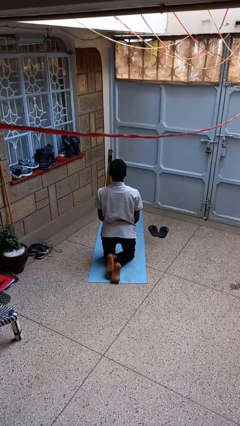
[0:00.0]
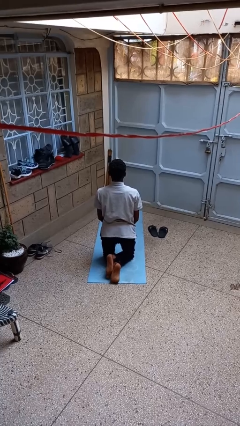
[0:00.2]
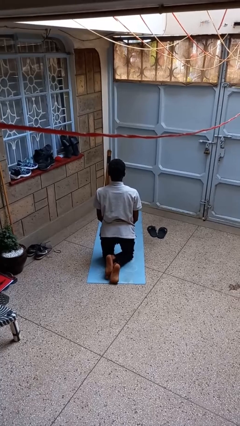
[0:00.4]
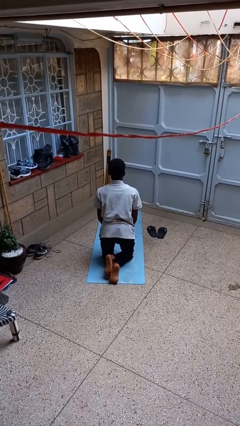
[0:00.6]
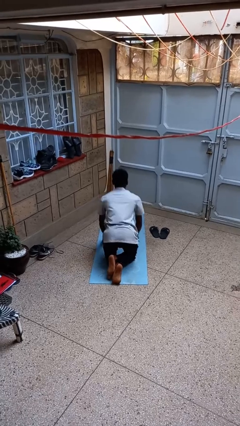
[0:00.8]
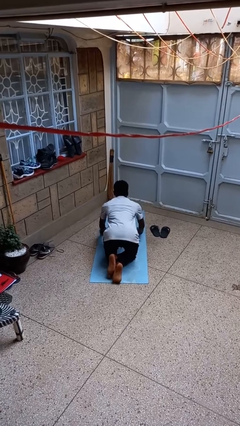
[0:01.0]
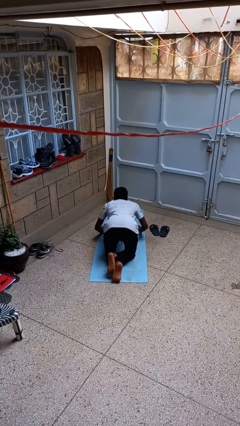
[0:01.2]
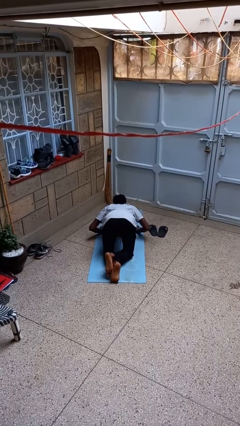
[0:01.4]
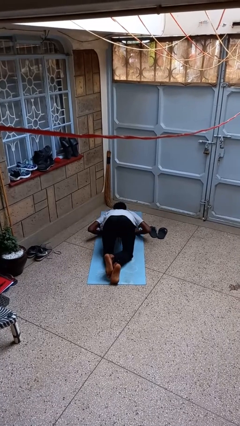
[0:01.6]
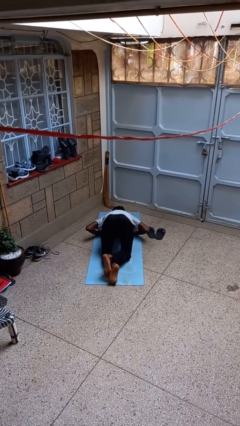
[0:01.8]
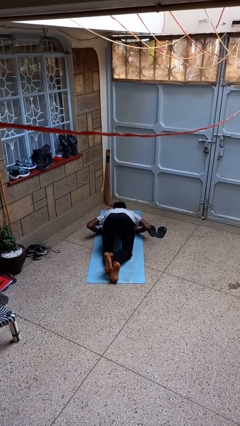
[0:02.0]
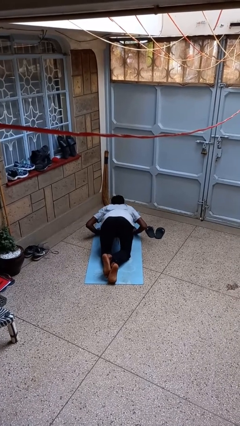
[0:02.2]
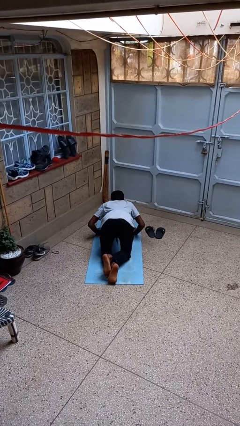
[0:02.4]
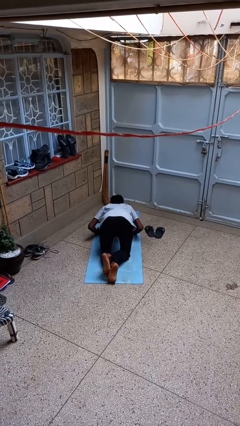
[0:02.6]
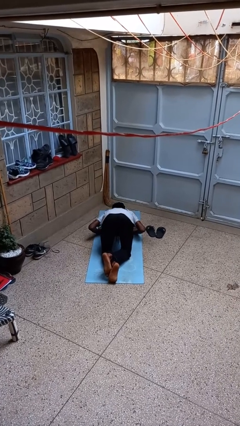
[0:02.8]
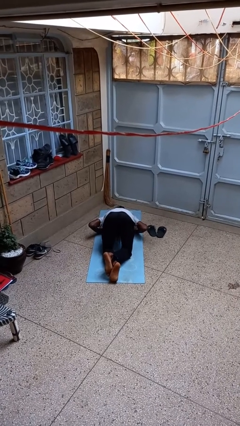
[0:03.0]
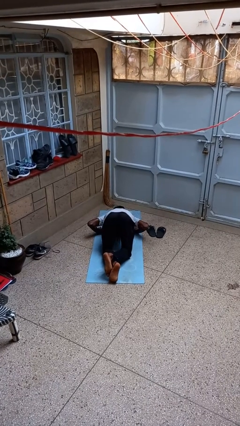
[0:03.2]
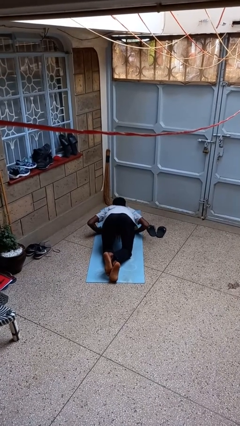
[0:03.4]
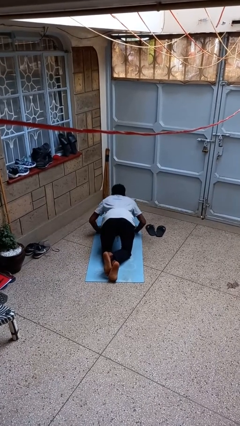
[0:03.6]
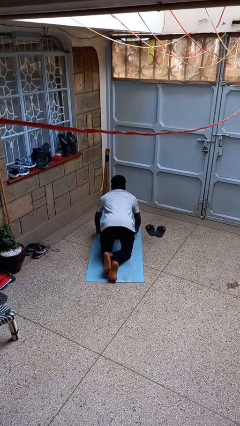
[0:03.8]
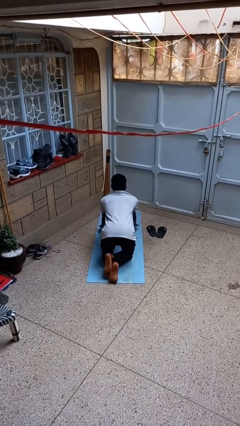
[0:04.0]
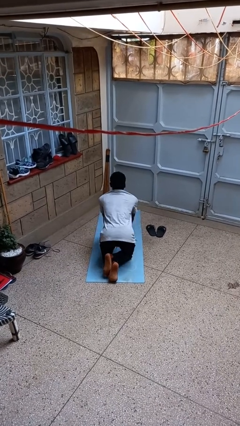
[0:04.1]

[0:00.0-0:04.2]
person exercises with pushup

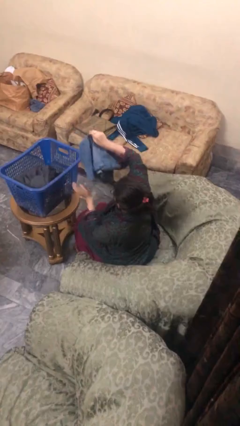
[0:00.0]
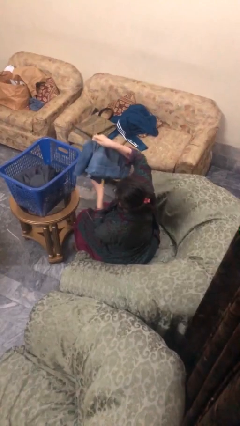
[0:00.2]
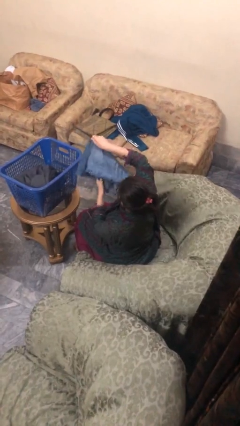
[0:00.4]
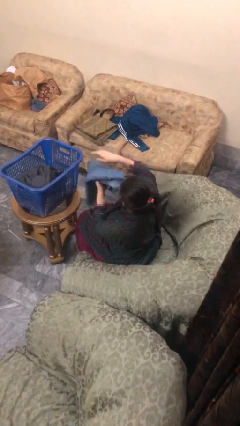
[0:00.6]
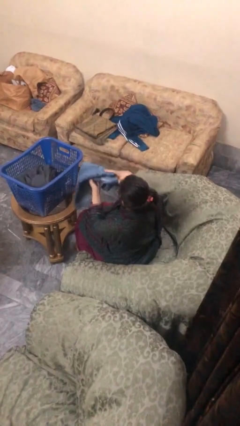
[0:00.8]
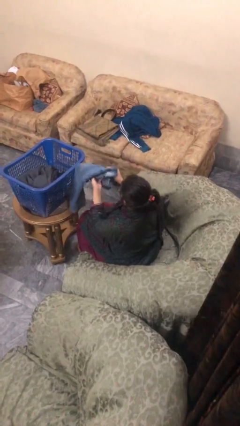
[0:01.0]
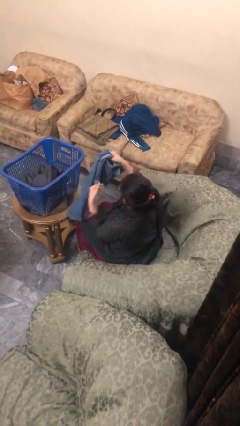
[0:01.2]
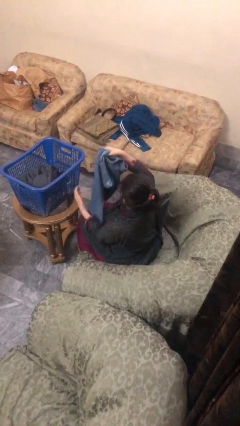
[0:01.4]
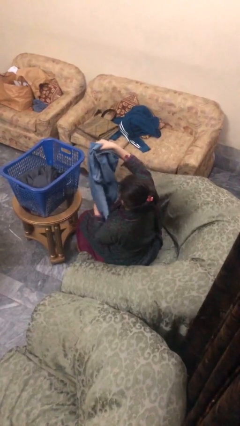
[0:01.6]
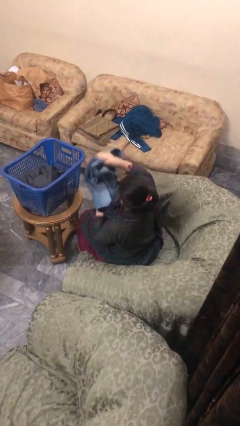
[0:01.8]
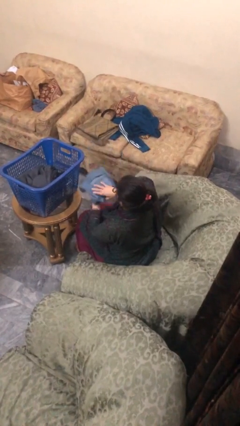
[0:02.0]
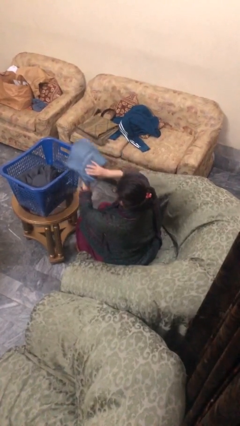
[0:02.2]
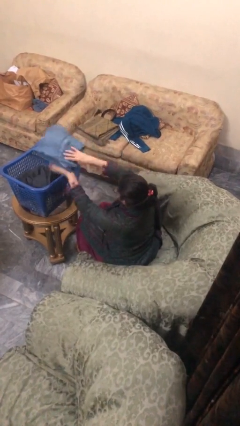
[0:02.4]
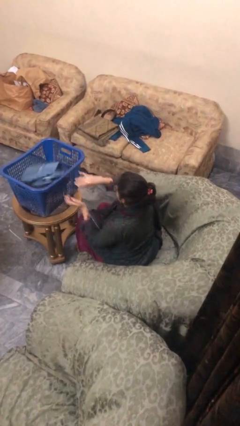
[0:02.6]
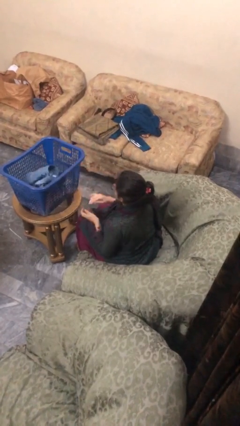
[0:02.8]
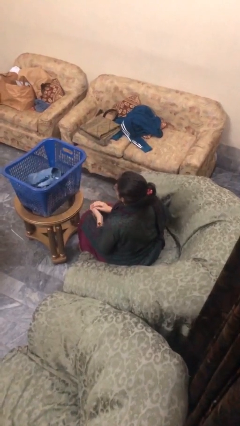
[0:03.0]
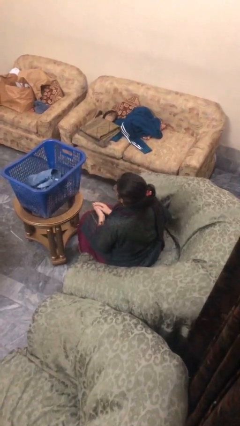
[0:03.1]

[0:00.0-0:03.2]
person folds pants

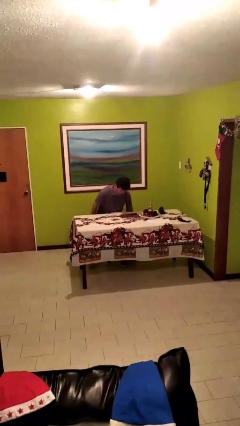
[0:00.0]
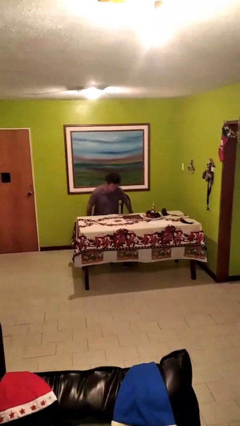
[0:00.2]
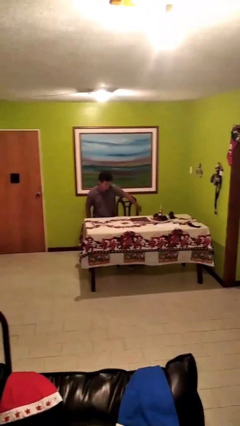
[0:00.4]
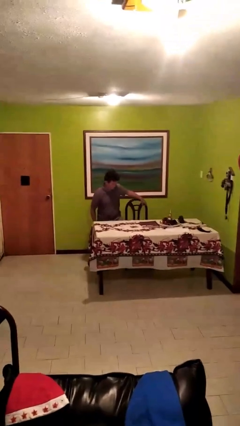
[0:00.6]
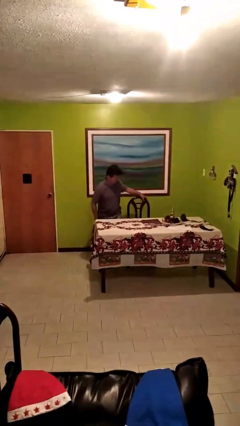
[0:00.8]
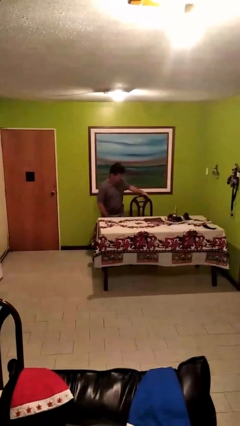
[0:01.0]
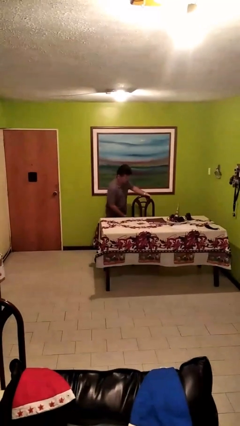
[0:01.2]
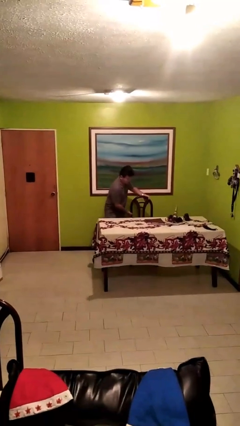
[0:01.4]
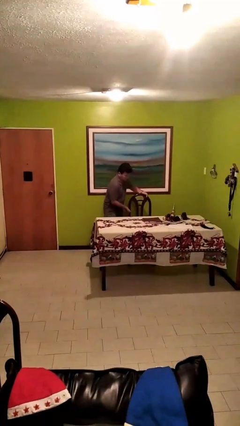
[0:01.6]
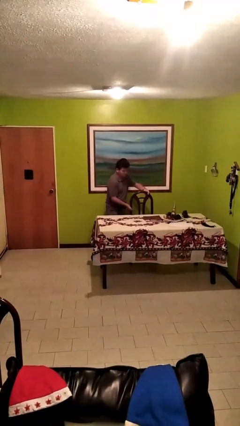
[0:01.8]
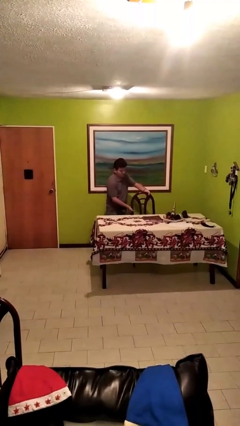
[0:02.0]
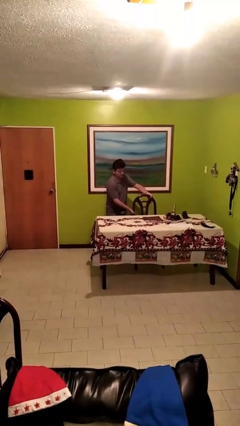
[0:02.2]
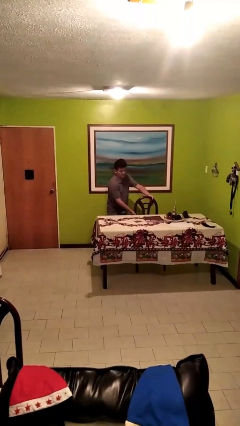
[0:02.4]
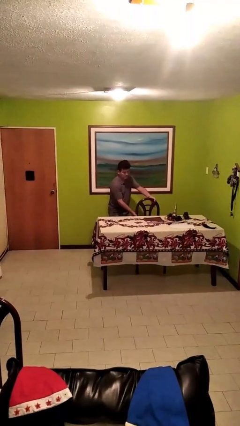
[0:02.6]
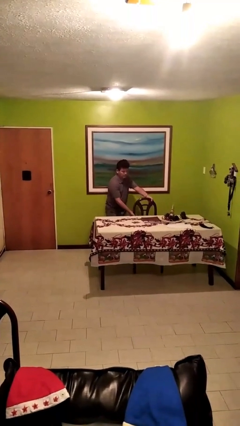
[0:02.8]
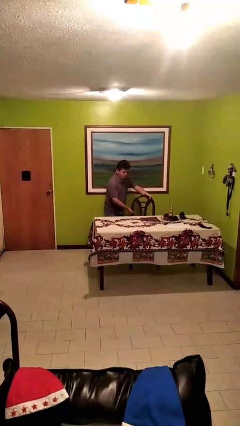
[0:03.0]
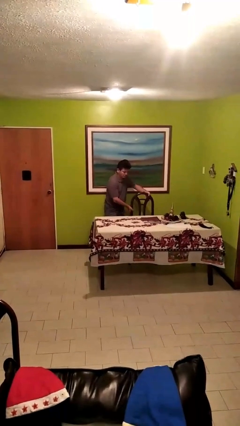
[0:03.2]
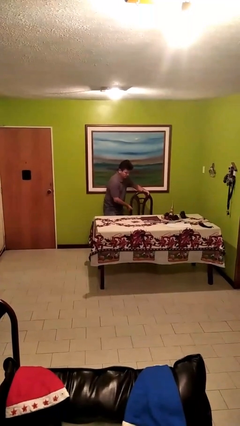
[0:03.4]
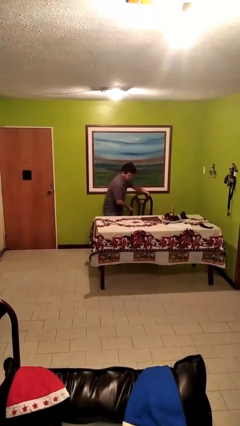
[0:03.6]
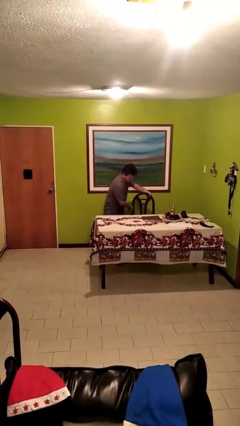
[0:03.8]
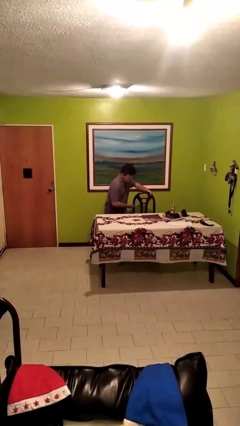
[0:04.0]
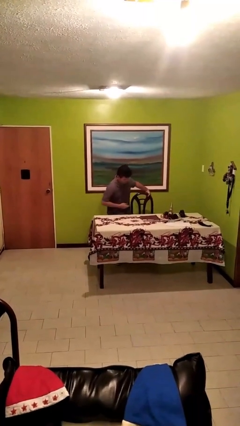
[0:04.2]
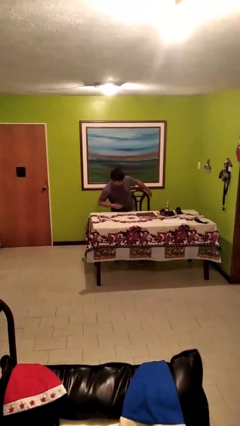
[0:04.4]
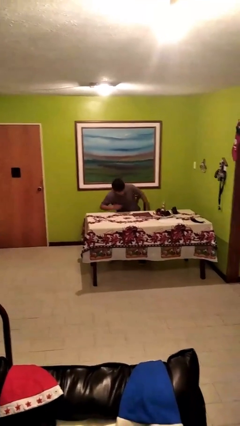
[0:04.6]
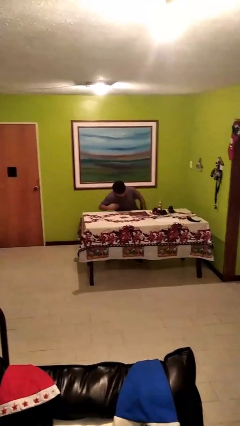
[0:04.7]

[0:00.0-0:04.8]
person stands up

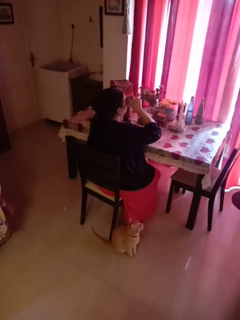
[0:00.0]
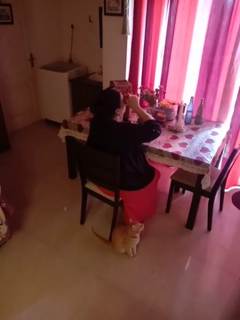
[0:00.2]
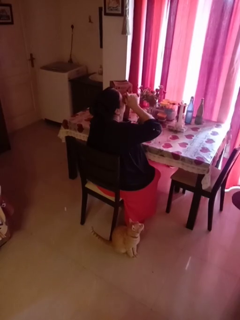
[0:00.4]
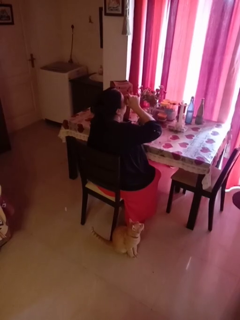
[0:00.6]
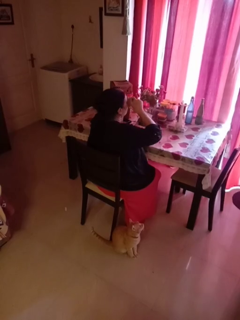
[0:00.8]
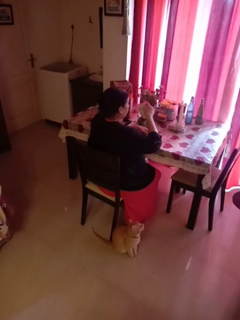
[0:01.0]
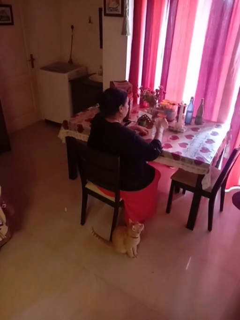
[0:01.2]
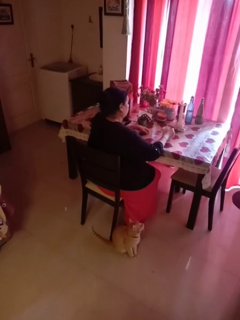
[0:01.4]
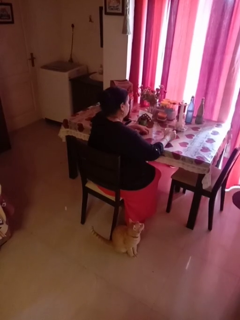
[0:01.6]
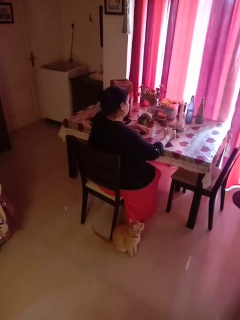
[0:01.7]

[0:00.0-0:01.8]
person drinks from mug

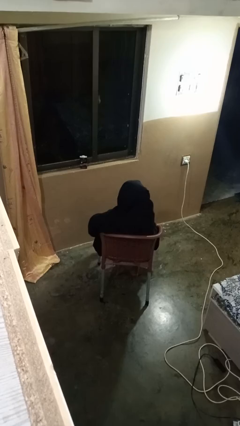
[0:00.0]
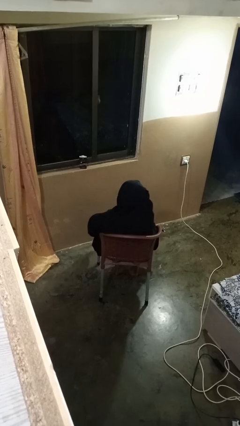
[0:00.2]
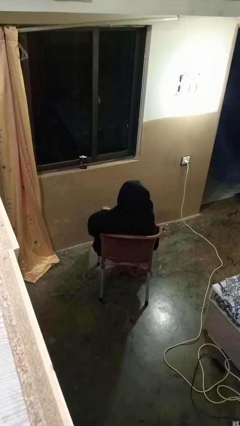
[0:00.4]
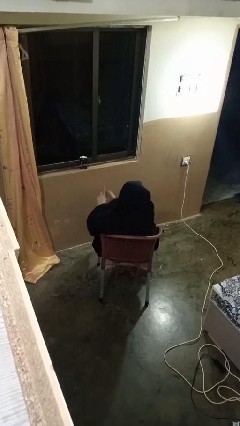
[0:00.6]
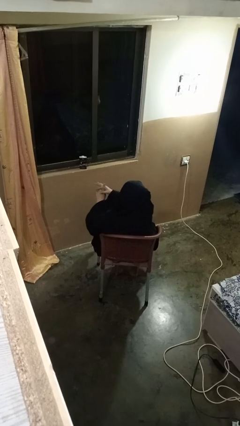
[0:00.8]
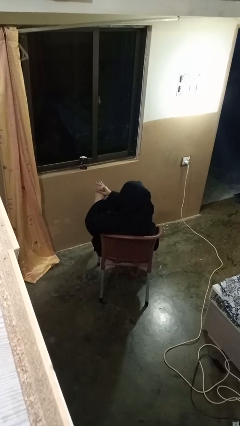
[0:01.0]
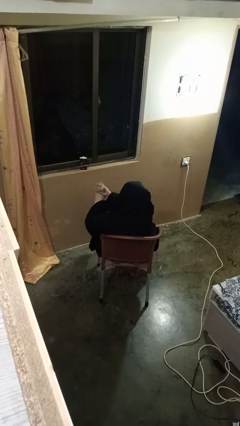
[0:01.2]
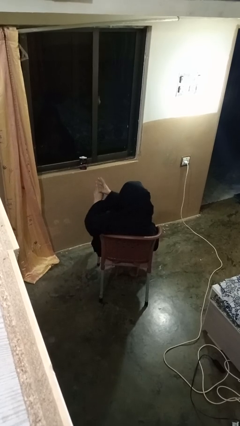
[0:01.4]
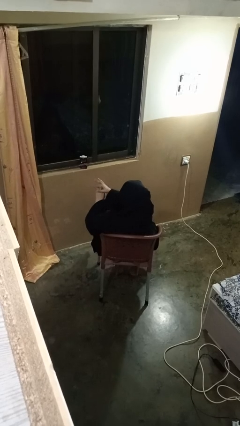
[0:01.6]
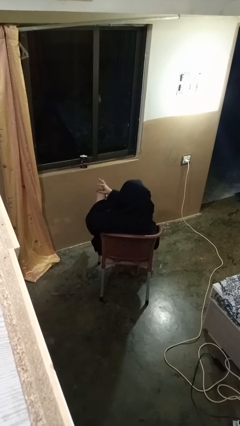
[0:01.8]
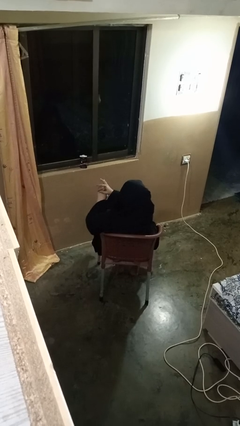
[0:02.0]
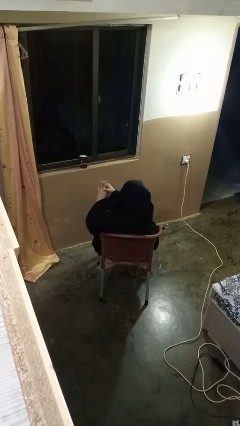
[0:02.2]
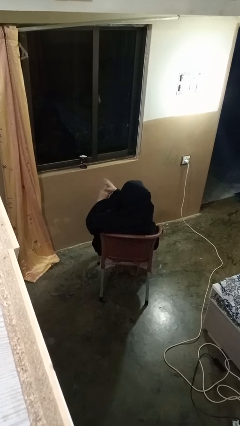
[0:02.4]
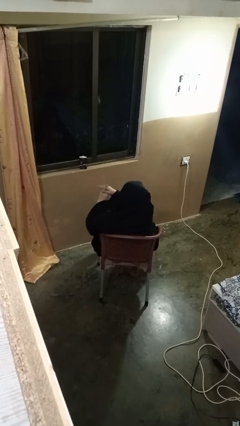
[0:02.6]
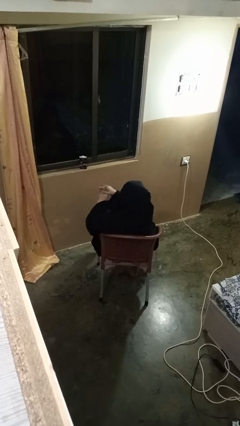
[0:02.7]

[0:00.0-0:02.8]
person cracks knuckles

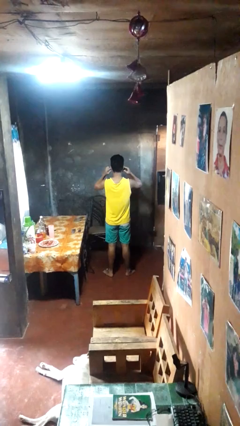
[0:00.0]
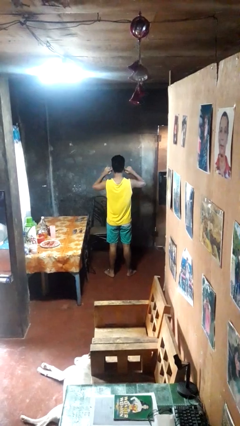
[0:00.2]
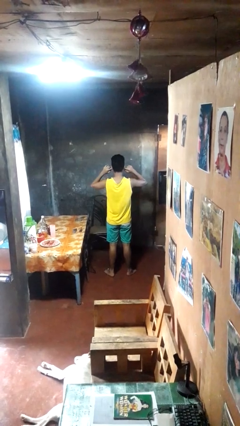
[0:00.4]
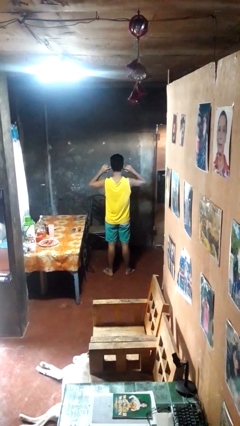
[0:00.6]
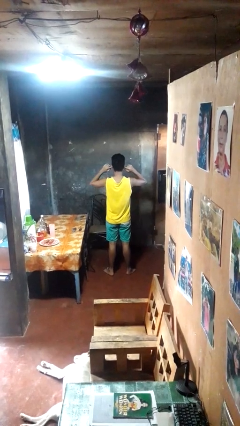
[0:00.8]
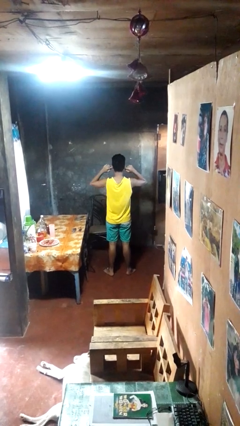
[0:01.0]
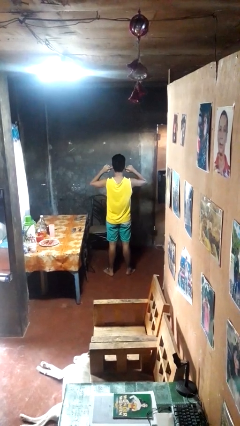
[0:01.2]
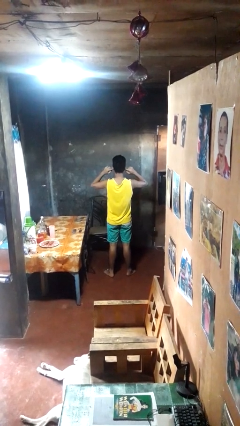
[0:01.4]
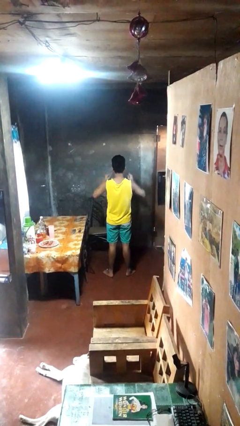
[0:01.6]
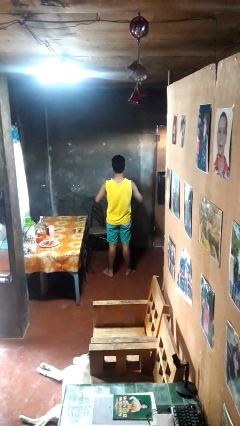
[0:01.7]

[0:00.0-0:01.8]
person puts fingers in ear
